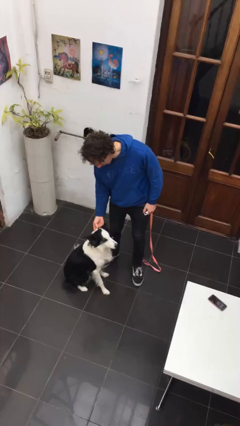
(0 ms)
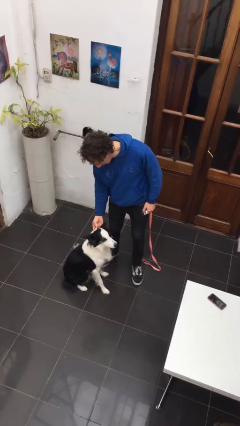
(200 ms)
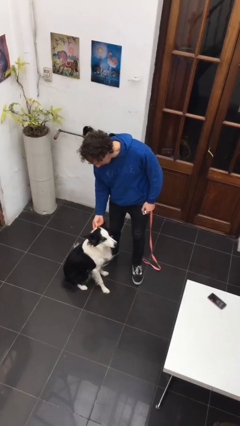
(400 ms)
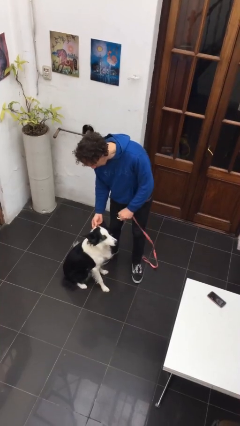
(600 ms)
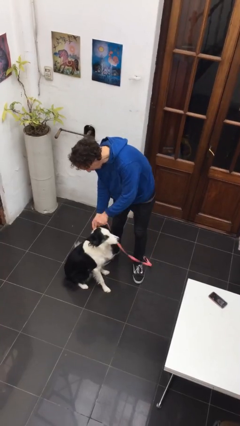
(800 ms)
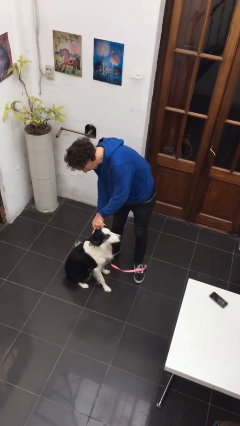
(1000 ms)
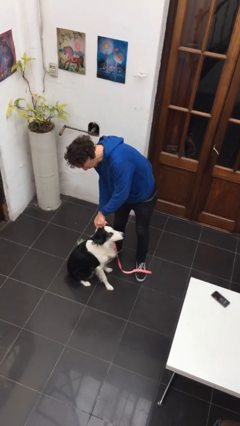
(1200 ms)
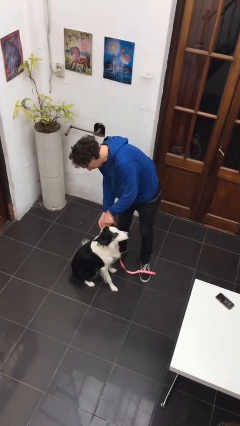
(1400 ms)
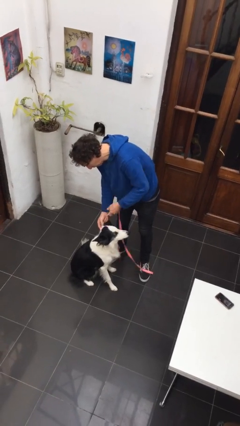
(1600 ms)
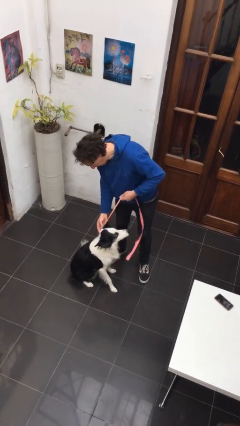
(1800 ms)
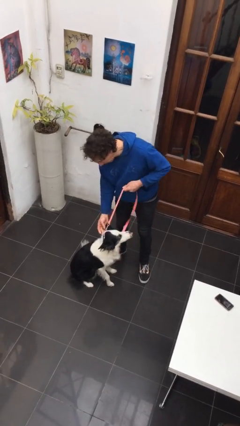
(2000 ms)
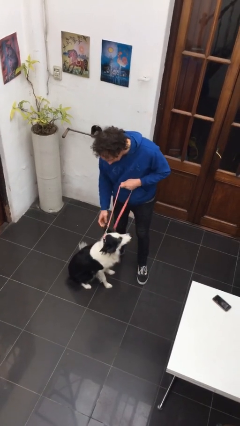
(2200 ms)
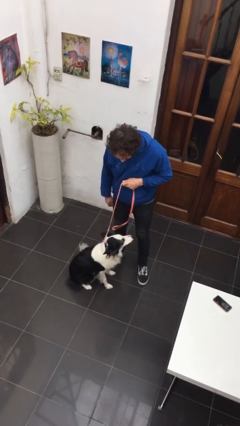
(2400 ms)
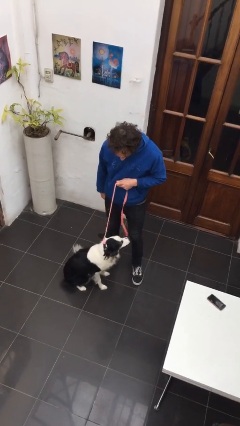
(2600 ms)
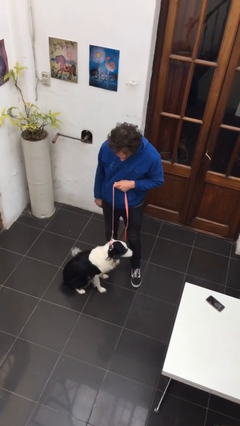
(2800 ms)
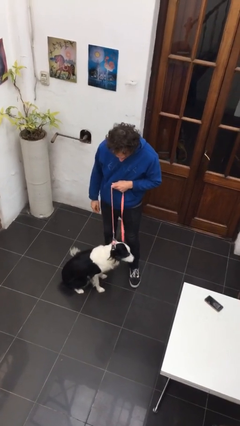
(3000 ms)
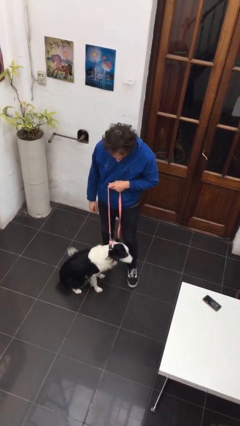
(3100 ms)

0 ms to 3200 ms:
person attaches leash to dog

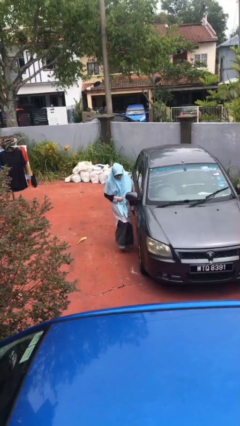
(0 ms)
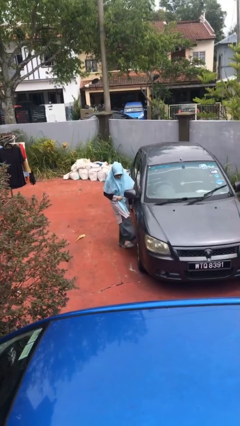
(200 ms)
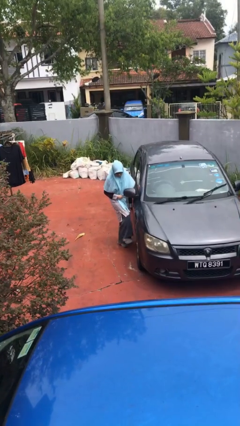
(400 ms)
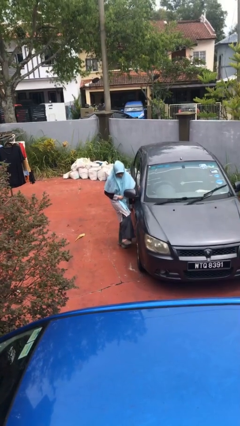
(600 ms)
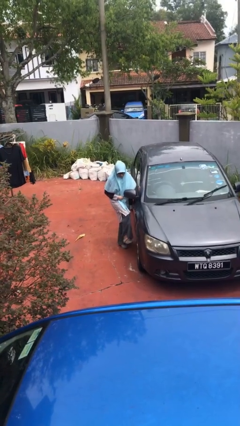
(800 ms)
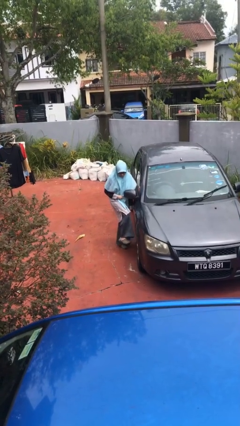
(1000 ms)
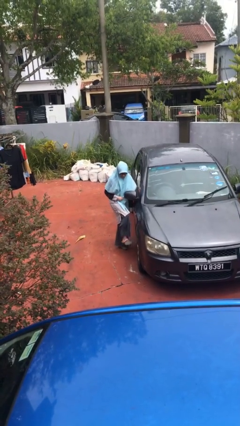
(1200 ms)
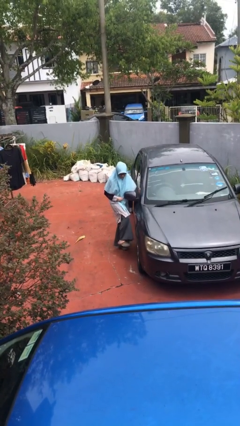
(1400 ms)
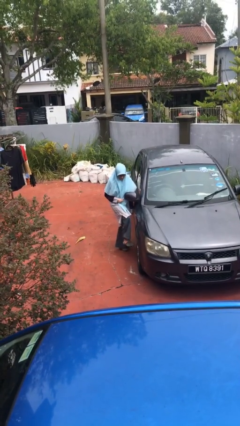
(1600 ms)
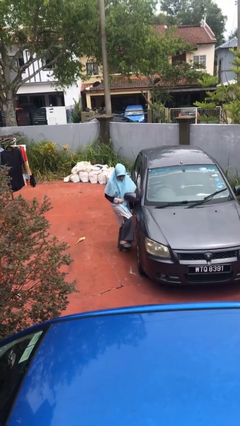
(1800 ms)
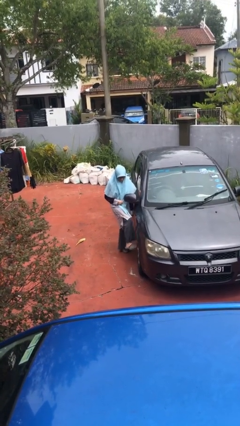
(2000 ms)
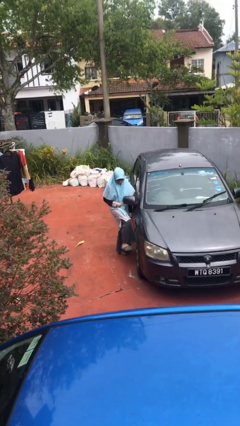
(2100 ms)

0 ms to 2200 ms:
person kicks car tires

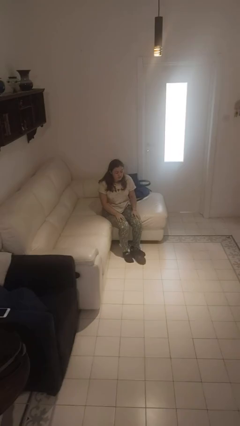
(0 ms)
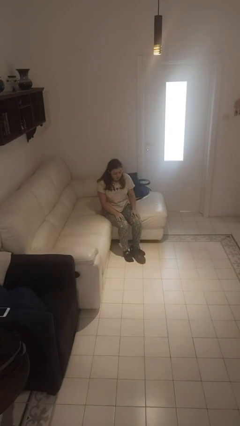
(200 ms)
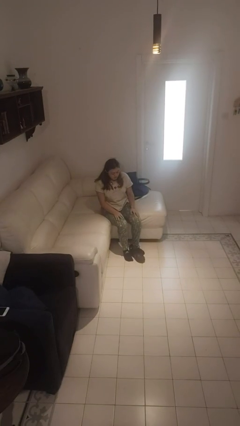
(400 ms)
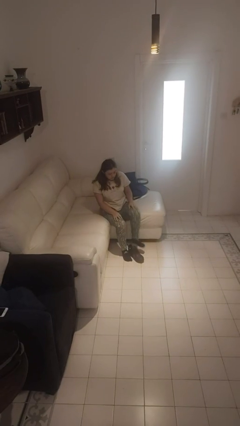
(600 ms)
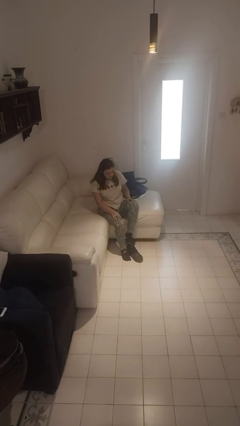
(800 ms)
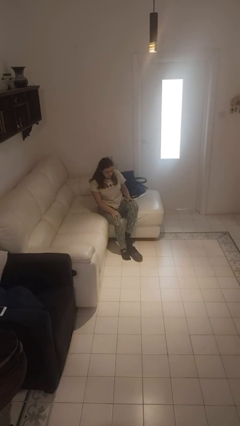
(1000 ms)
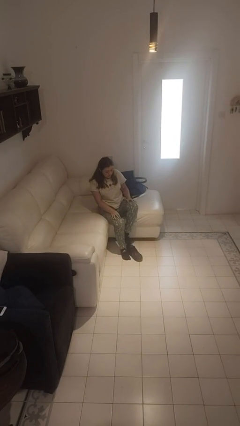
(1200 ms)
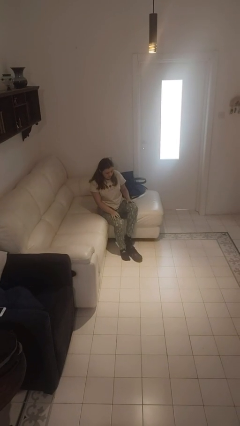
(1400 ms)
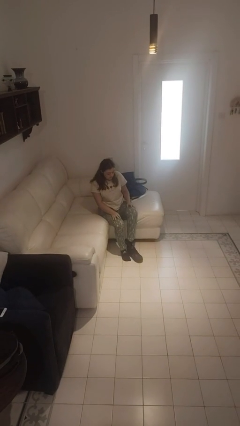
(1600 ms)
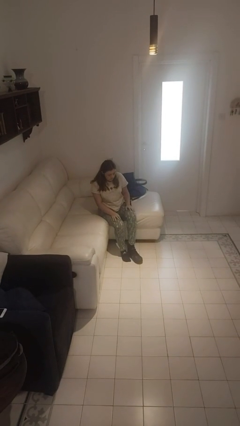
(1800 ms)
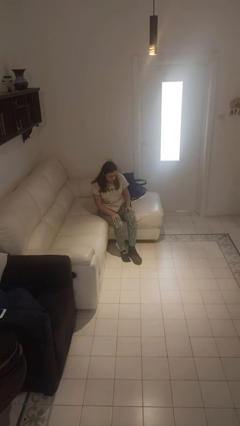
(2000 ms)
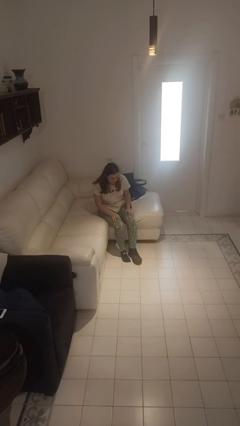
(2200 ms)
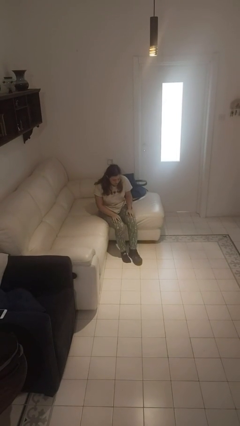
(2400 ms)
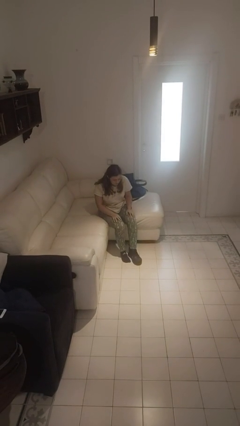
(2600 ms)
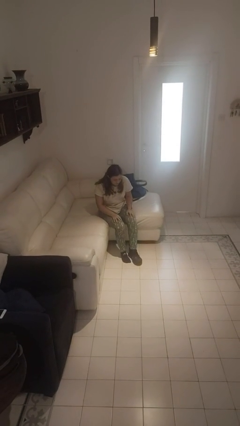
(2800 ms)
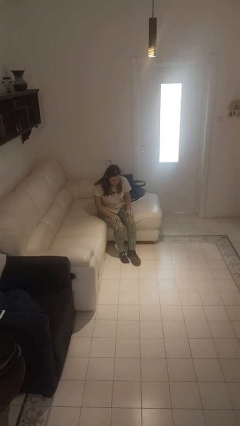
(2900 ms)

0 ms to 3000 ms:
person puts on shoes

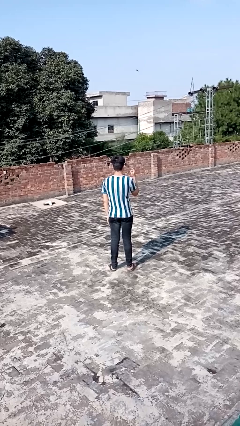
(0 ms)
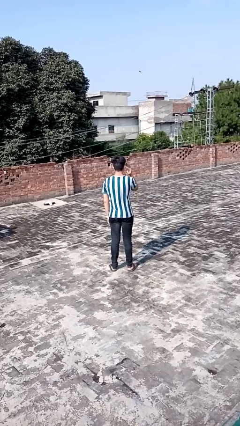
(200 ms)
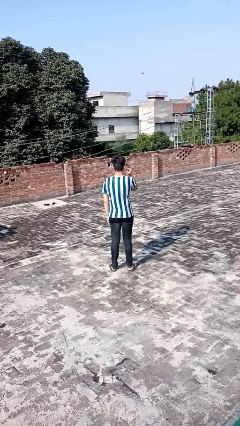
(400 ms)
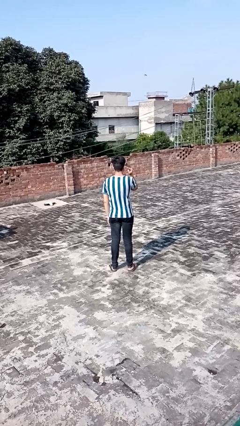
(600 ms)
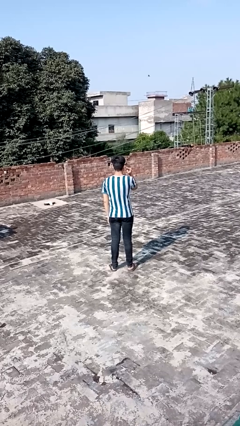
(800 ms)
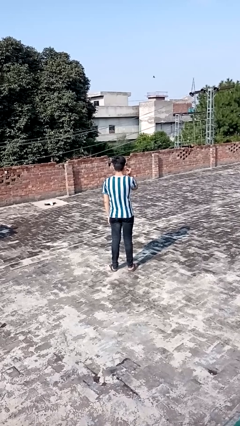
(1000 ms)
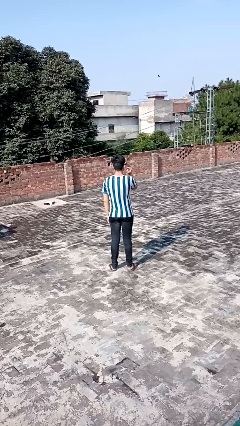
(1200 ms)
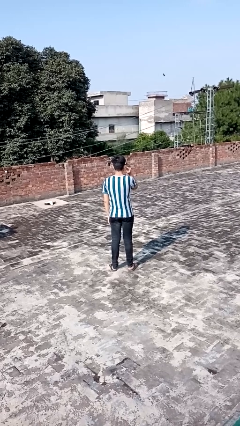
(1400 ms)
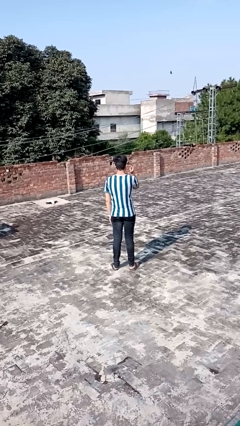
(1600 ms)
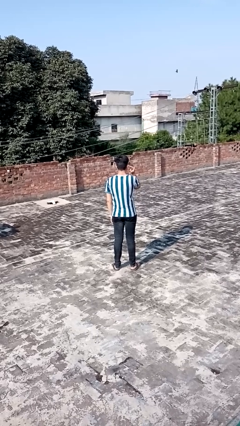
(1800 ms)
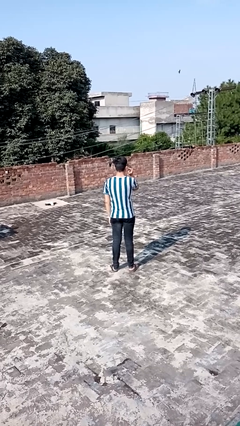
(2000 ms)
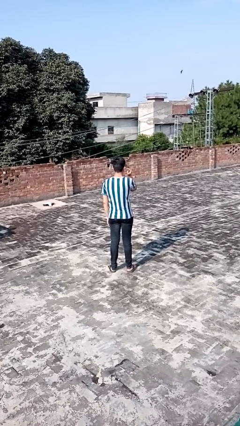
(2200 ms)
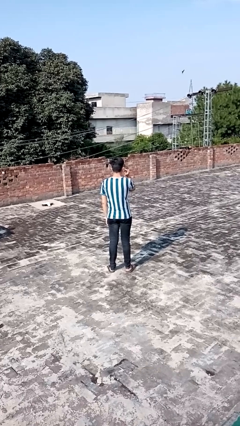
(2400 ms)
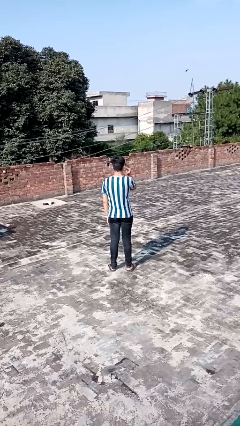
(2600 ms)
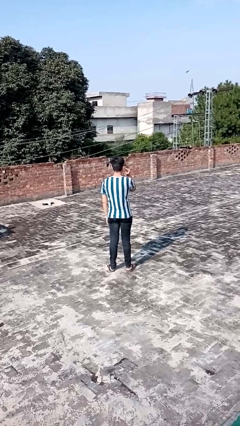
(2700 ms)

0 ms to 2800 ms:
person gestures listen closely

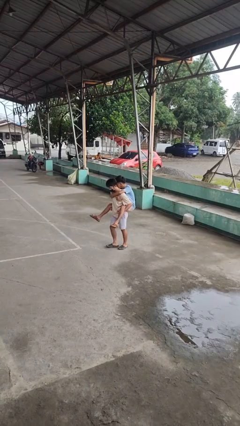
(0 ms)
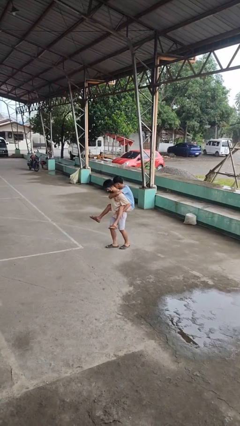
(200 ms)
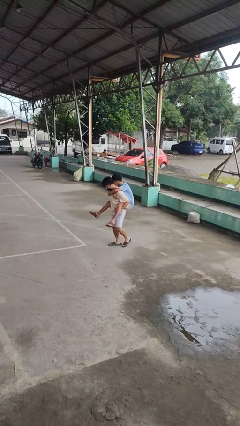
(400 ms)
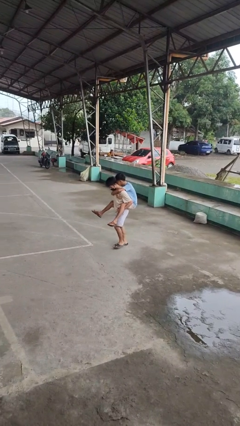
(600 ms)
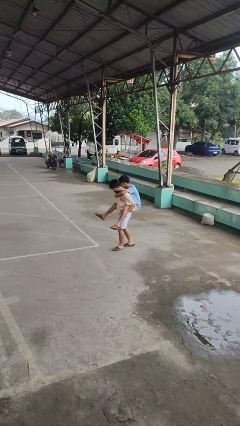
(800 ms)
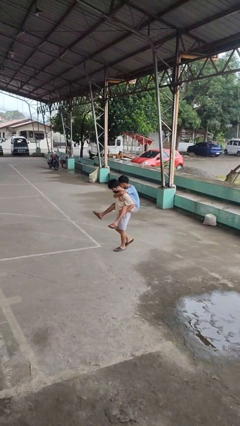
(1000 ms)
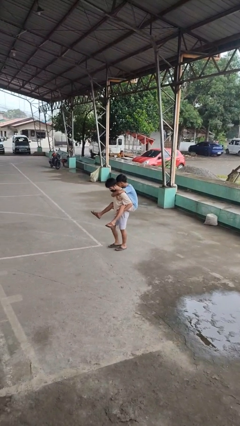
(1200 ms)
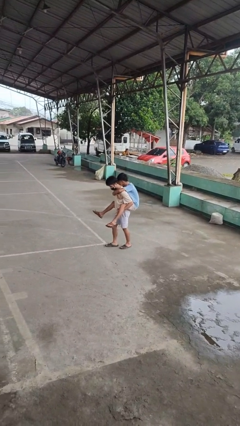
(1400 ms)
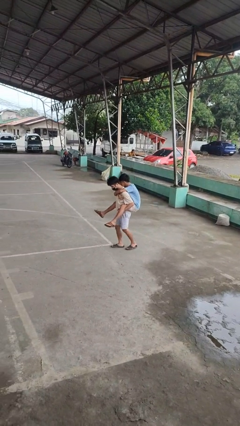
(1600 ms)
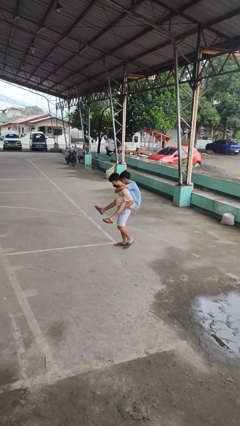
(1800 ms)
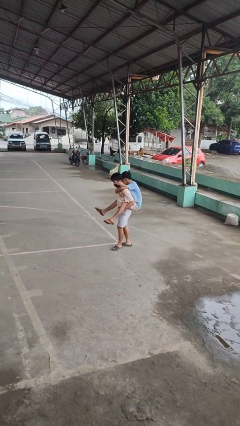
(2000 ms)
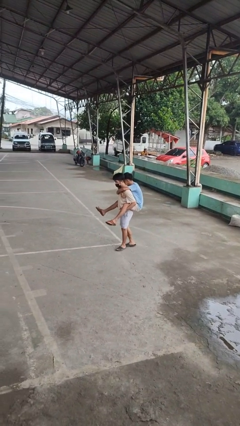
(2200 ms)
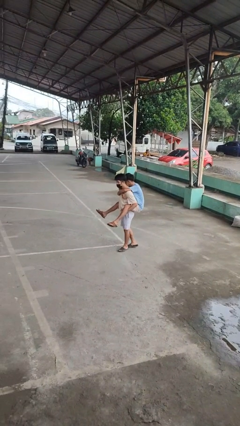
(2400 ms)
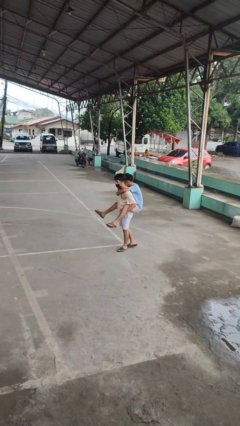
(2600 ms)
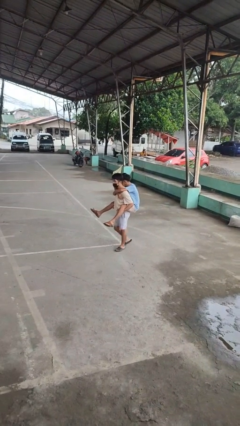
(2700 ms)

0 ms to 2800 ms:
person carries person on back

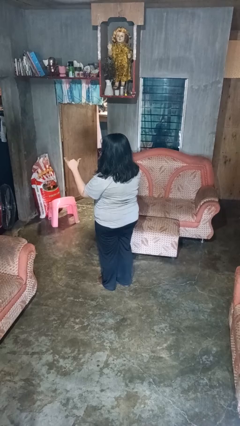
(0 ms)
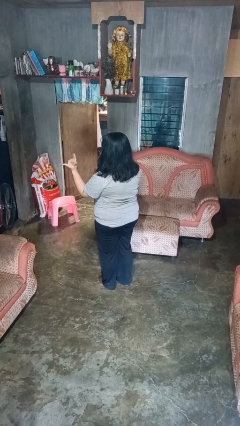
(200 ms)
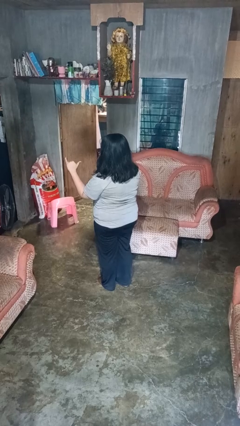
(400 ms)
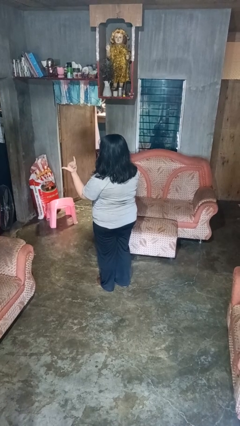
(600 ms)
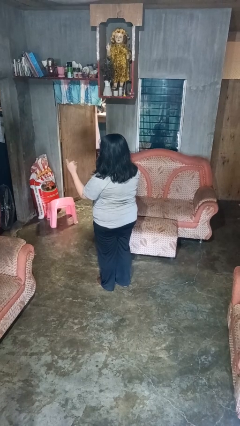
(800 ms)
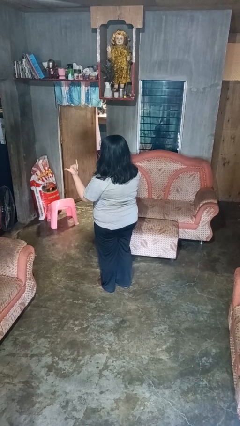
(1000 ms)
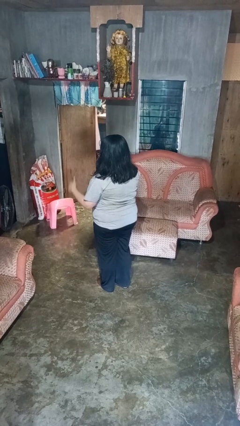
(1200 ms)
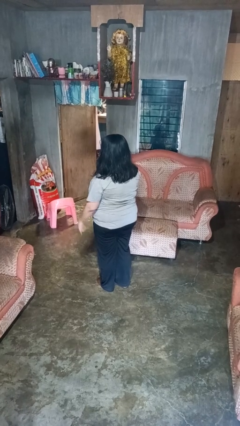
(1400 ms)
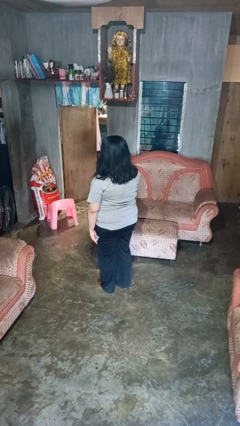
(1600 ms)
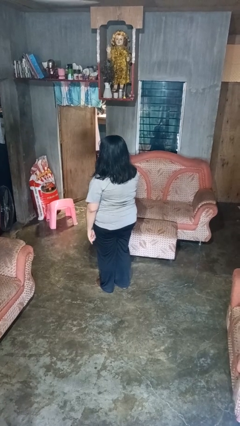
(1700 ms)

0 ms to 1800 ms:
person gestures hang loose

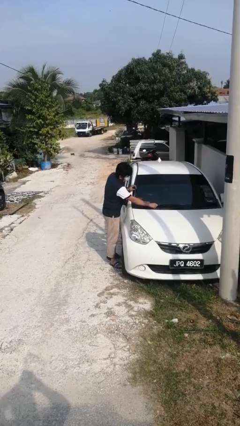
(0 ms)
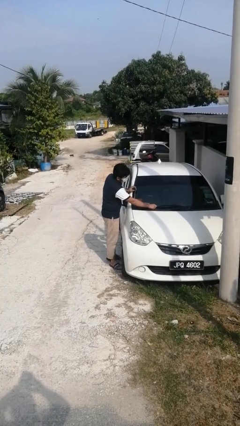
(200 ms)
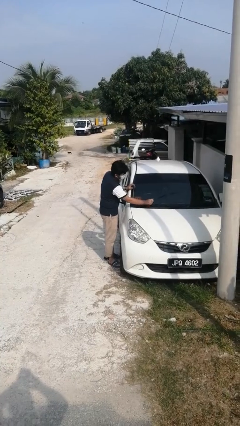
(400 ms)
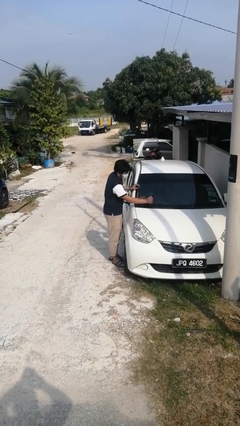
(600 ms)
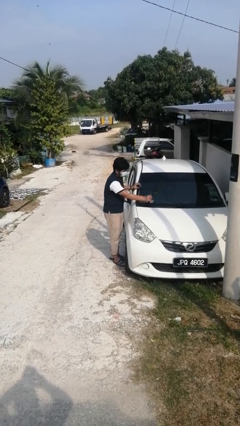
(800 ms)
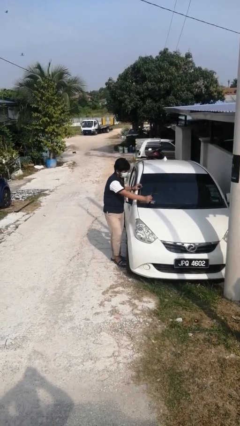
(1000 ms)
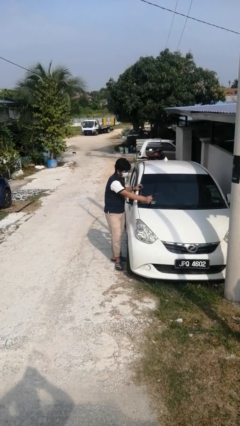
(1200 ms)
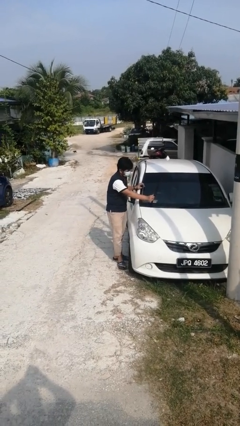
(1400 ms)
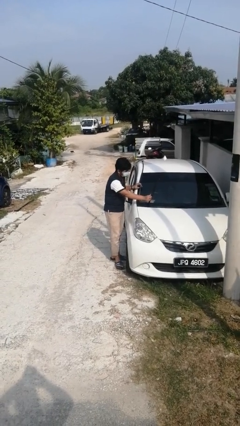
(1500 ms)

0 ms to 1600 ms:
person flips up car wipers
